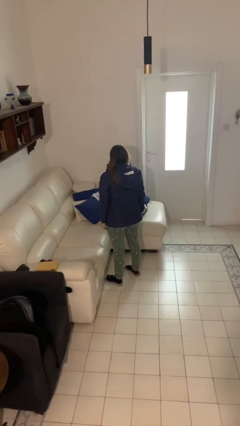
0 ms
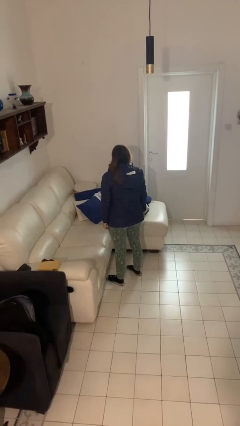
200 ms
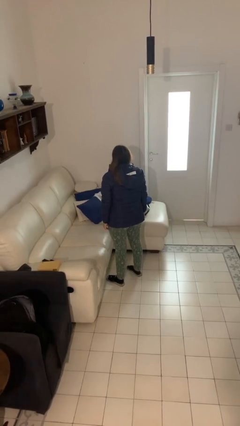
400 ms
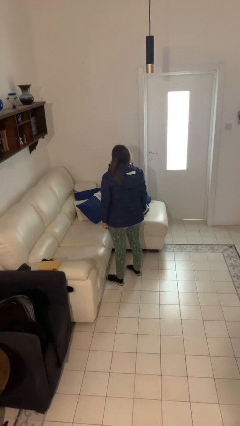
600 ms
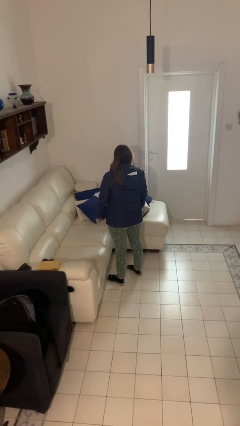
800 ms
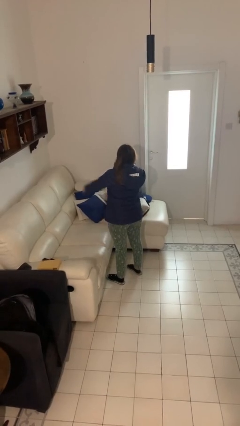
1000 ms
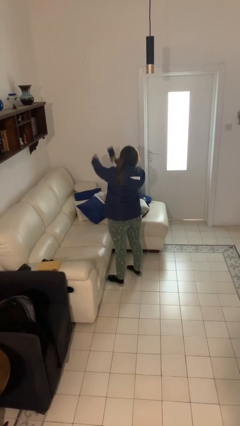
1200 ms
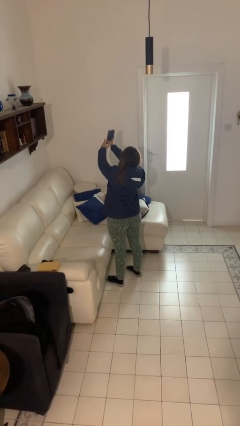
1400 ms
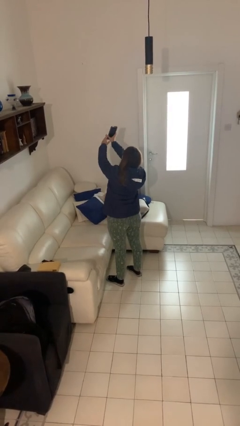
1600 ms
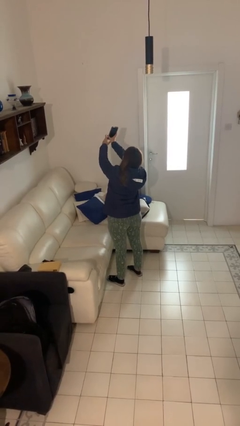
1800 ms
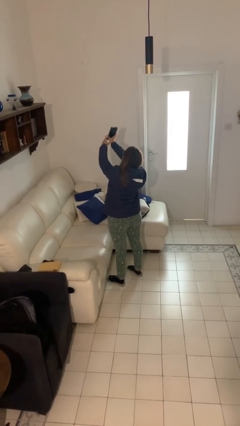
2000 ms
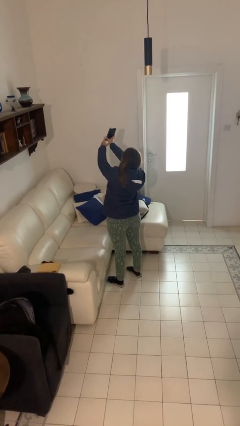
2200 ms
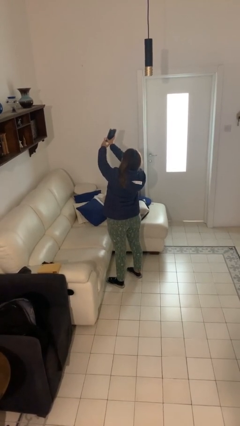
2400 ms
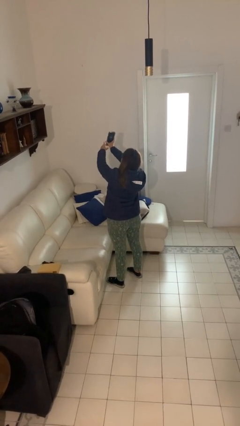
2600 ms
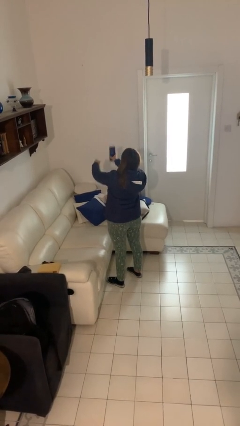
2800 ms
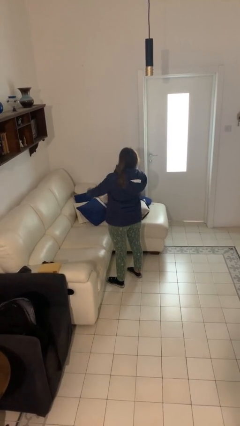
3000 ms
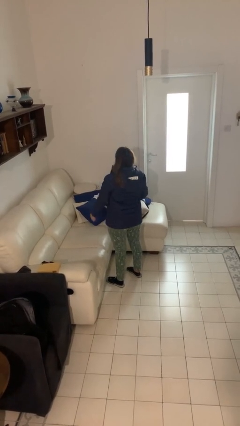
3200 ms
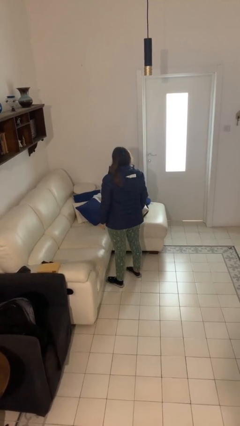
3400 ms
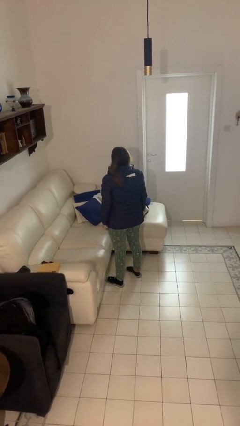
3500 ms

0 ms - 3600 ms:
person takes selfie

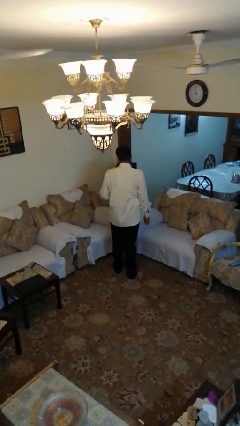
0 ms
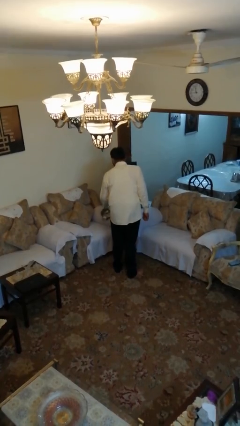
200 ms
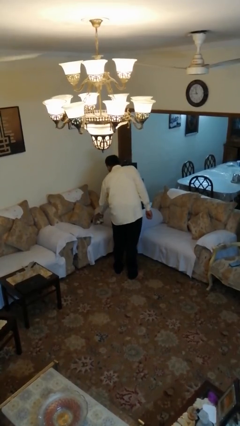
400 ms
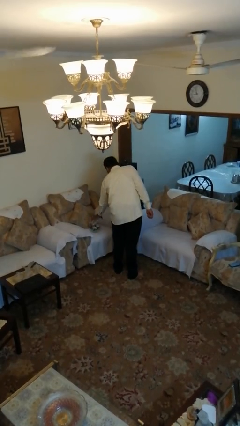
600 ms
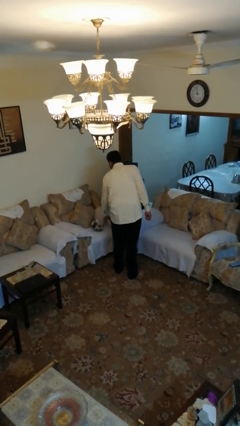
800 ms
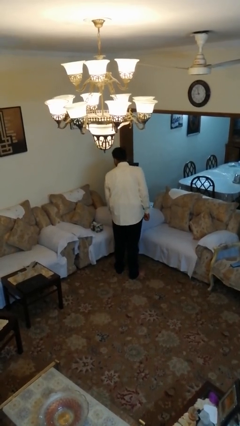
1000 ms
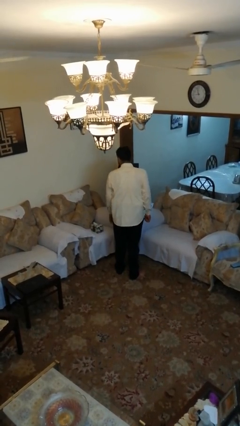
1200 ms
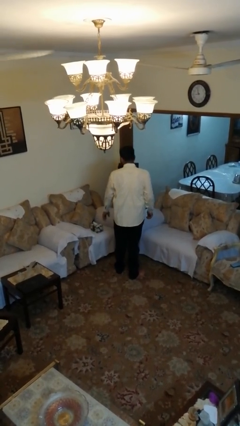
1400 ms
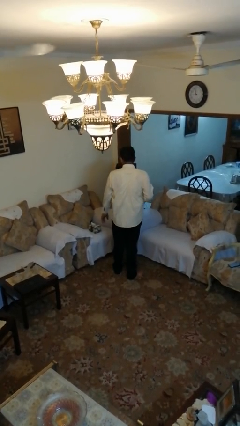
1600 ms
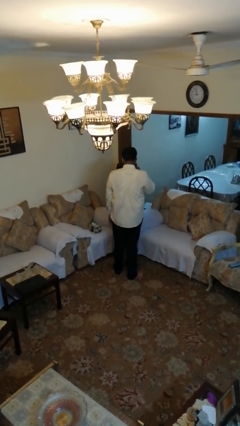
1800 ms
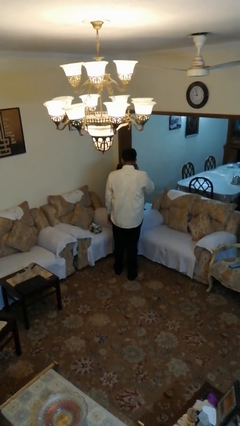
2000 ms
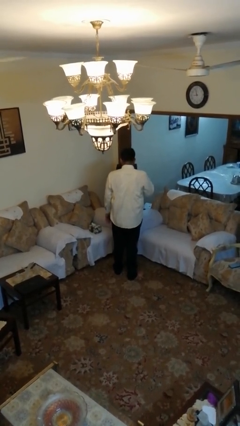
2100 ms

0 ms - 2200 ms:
person puts down object on couch

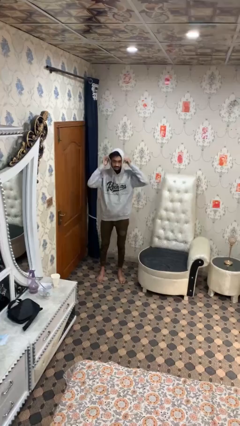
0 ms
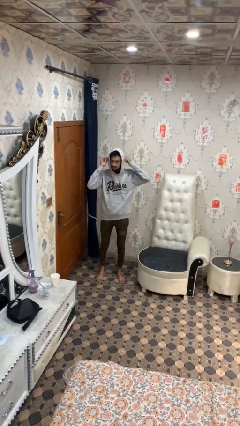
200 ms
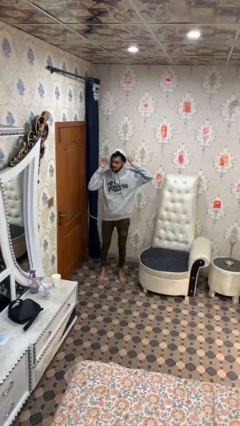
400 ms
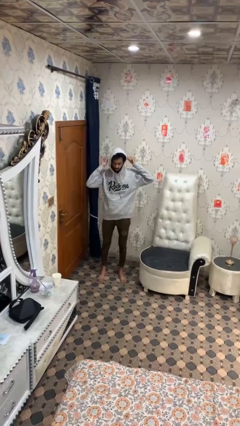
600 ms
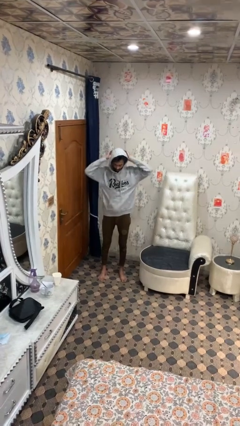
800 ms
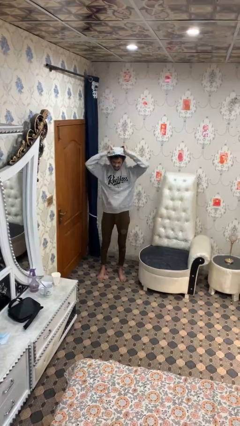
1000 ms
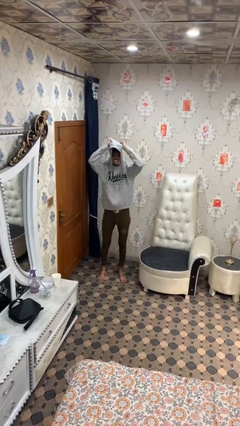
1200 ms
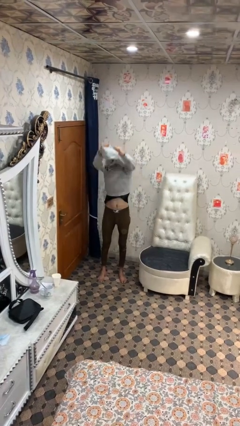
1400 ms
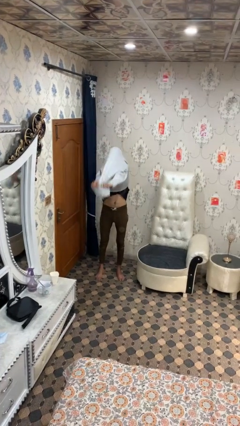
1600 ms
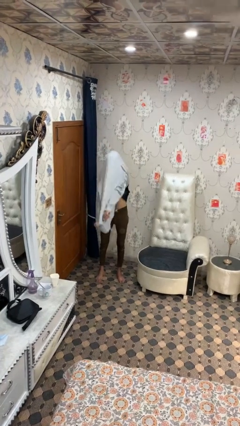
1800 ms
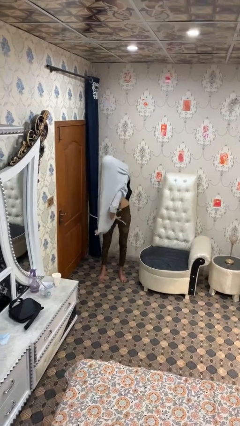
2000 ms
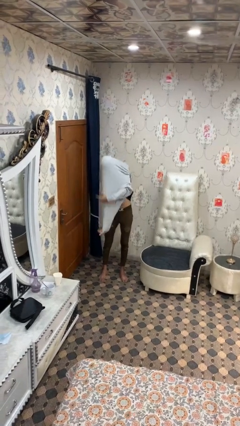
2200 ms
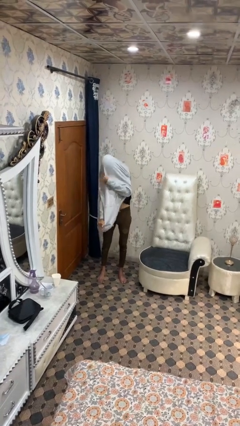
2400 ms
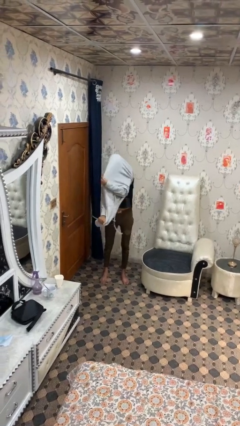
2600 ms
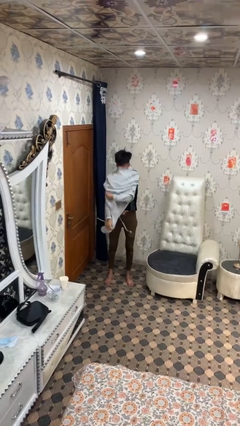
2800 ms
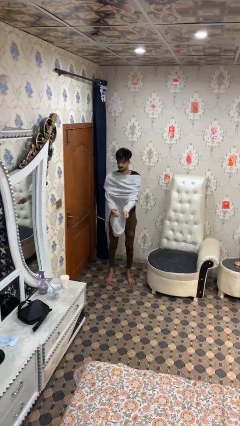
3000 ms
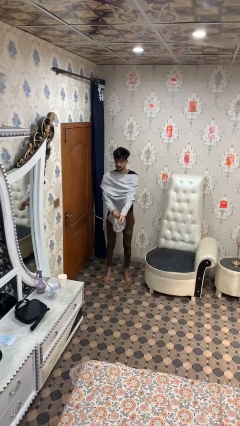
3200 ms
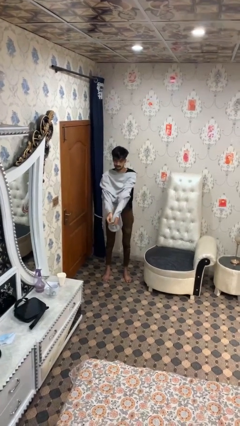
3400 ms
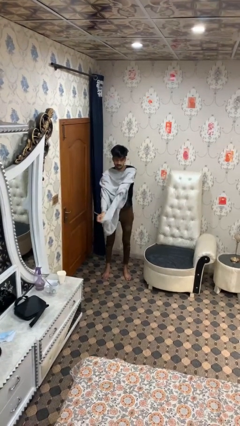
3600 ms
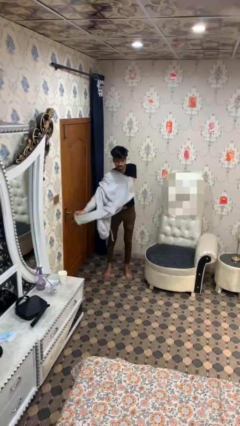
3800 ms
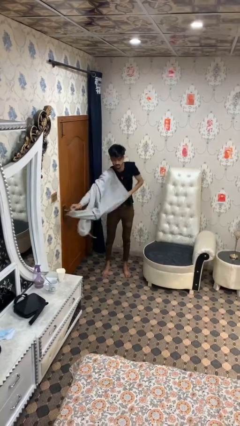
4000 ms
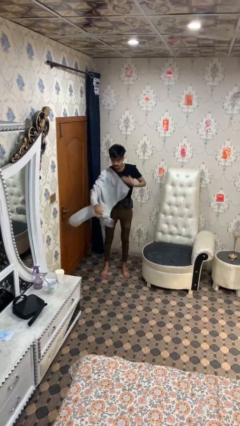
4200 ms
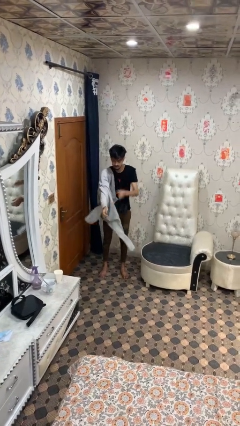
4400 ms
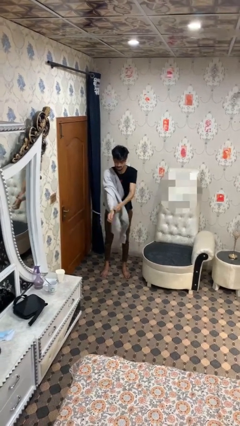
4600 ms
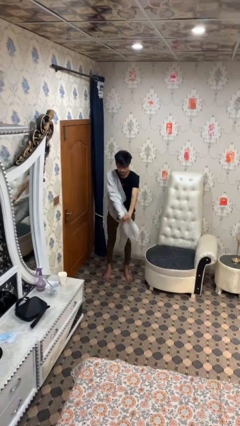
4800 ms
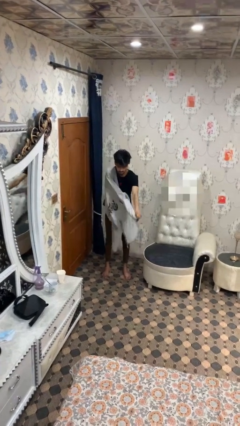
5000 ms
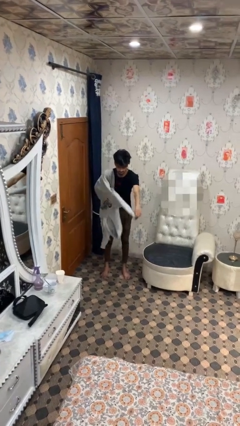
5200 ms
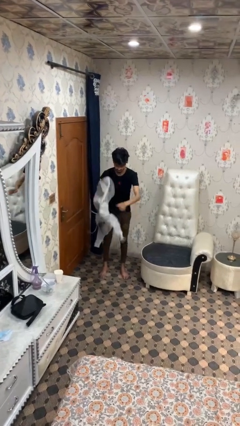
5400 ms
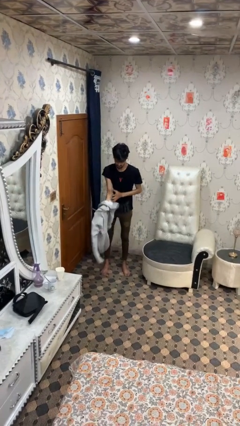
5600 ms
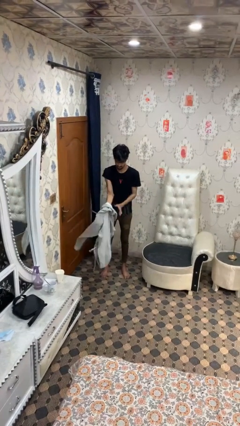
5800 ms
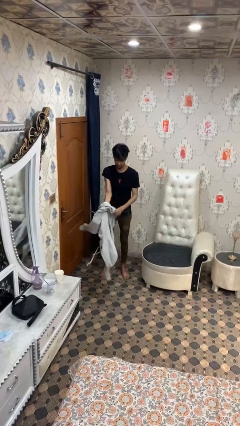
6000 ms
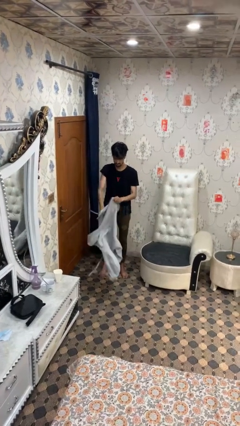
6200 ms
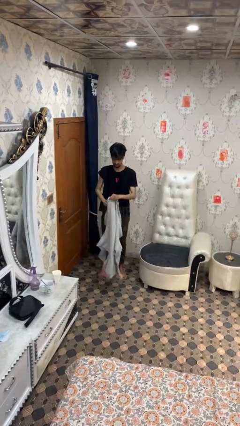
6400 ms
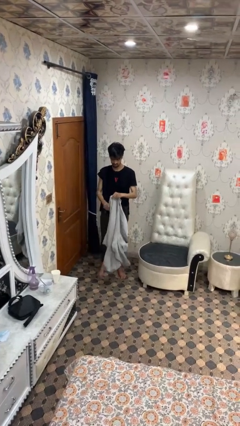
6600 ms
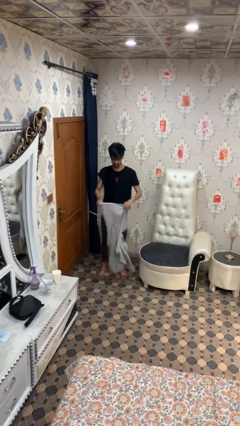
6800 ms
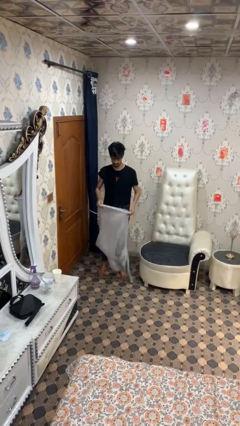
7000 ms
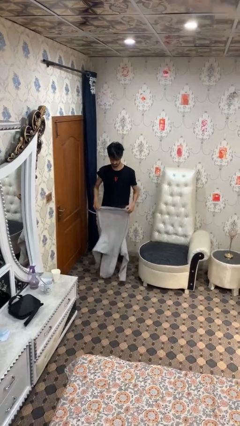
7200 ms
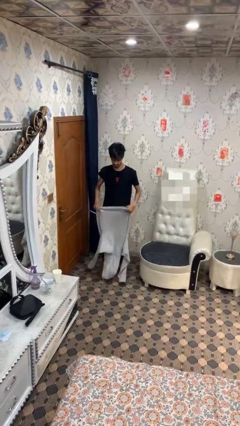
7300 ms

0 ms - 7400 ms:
person takes off hoodie

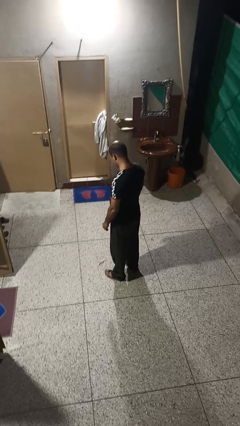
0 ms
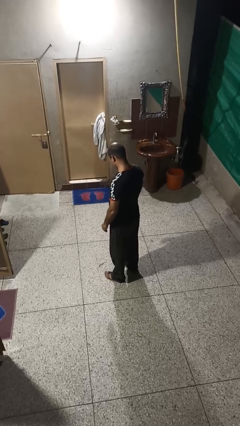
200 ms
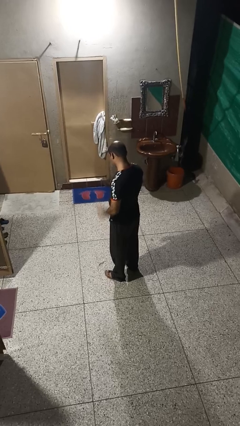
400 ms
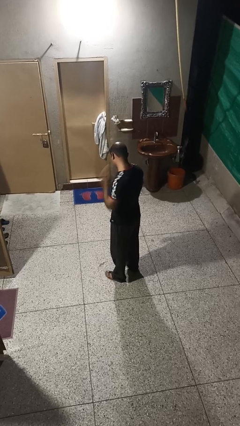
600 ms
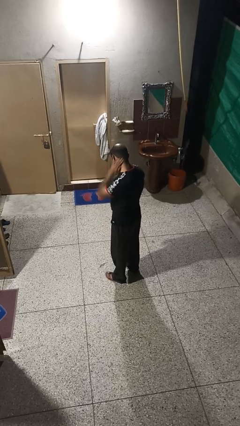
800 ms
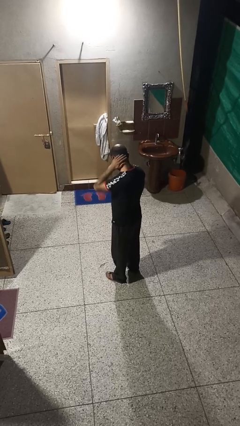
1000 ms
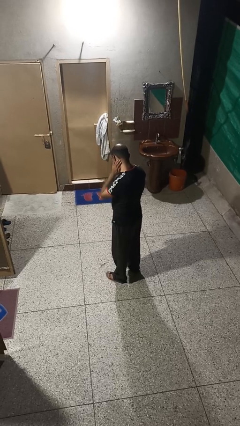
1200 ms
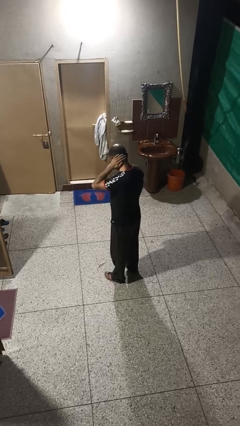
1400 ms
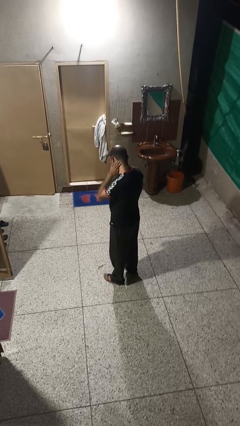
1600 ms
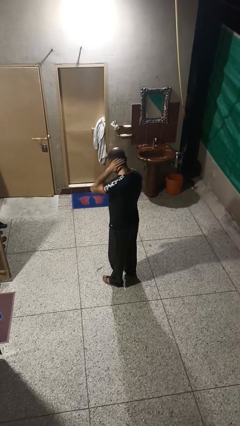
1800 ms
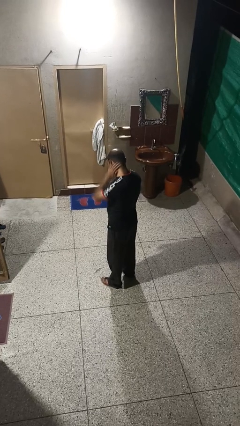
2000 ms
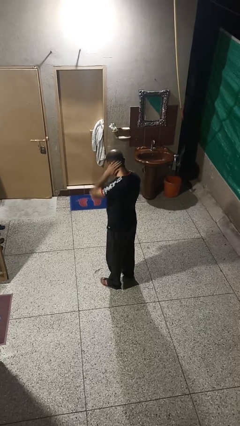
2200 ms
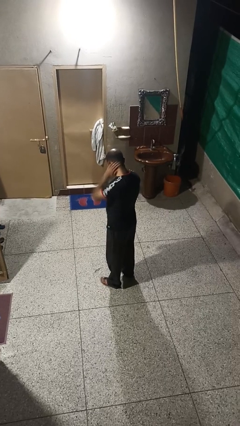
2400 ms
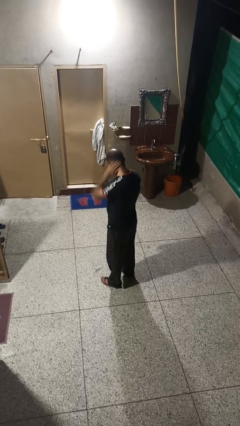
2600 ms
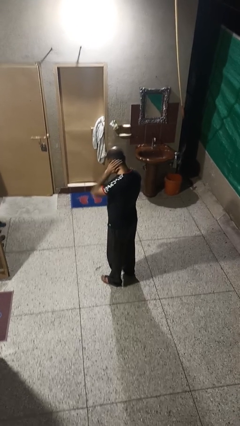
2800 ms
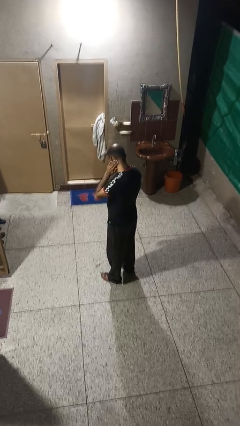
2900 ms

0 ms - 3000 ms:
person rubs neck

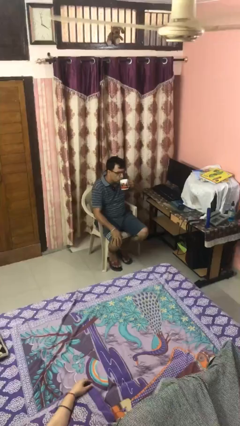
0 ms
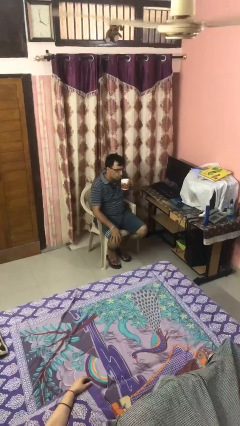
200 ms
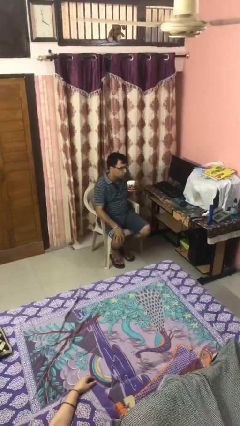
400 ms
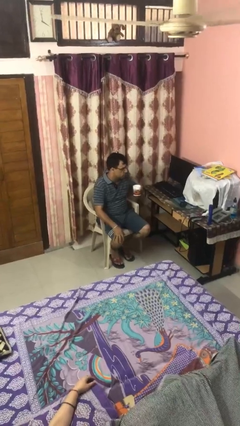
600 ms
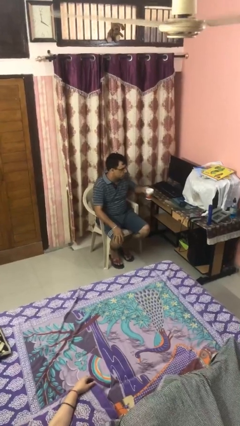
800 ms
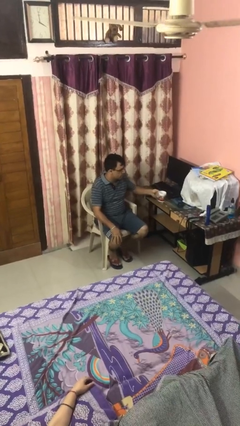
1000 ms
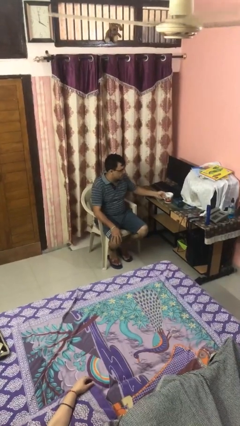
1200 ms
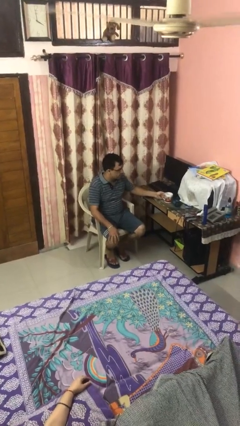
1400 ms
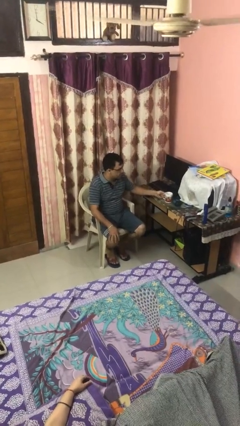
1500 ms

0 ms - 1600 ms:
person puts down object on table
